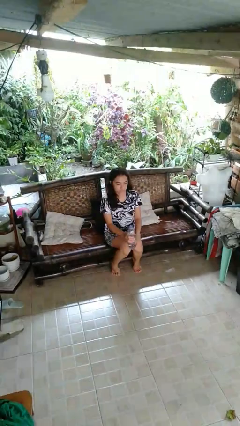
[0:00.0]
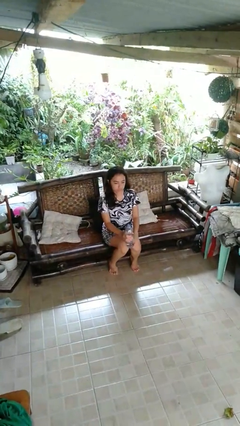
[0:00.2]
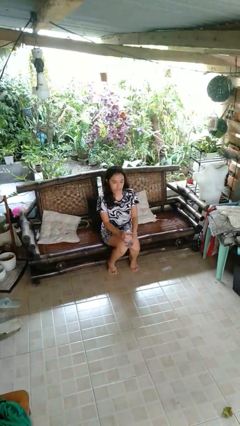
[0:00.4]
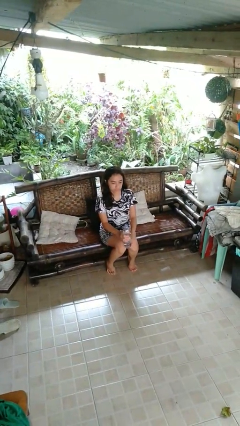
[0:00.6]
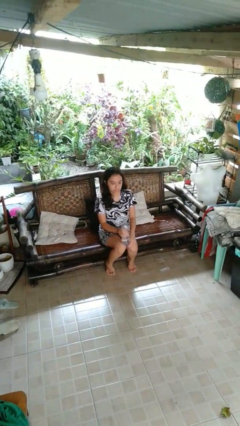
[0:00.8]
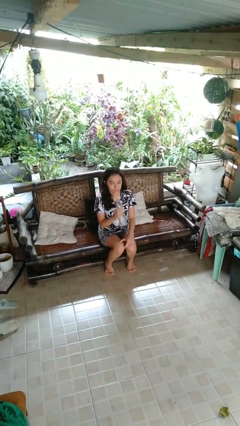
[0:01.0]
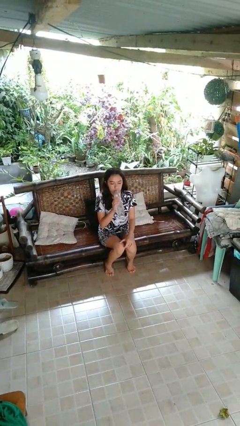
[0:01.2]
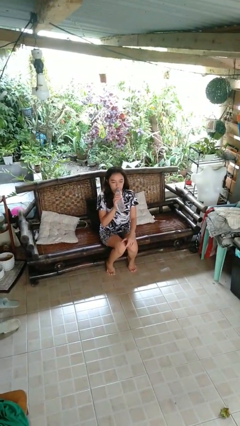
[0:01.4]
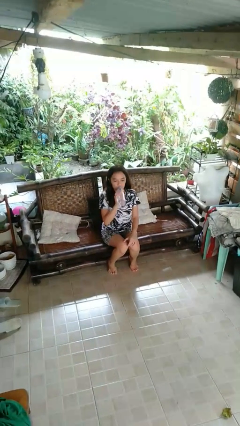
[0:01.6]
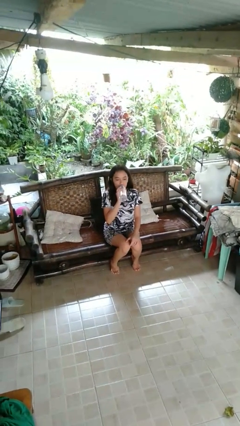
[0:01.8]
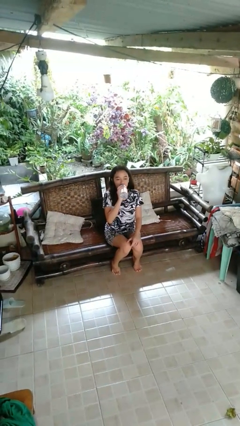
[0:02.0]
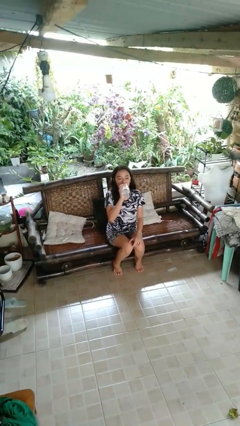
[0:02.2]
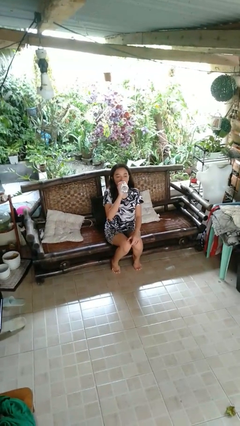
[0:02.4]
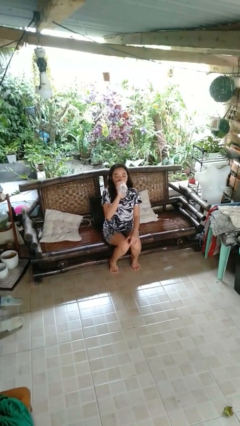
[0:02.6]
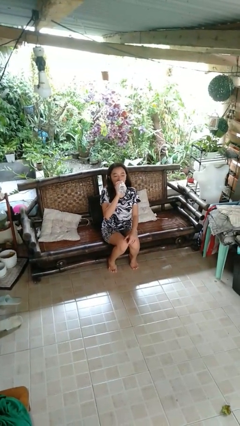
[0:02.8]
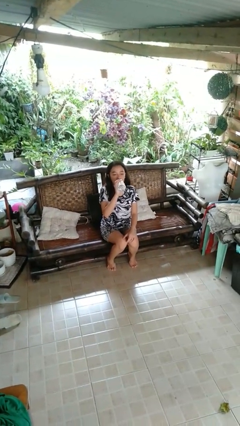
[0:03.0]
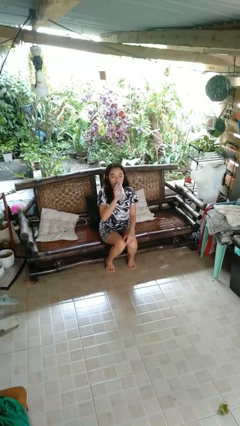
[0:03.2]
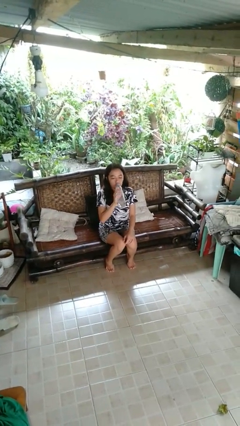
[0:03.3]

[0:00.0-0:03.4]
person drinks from bottle

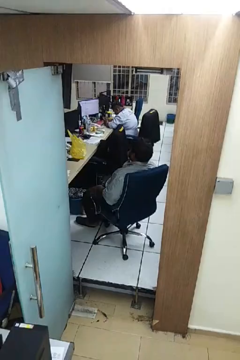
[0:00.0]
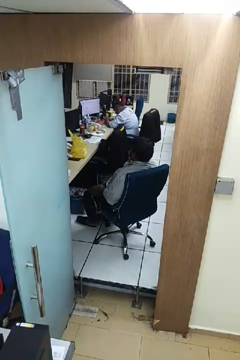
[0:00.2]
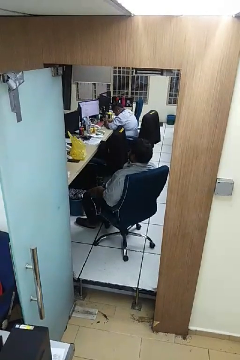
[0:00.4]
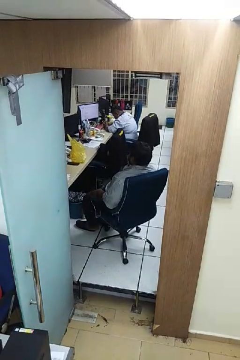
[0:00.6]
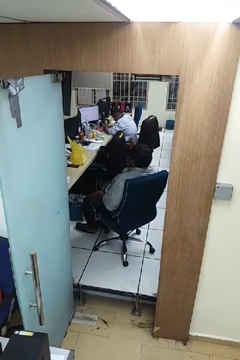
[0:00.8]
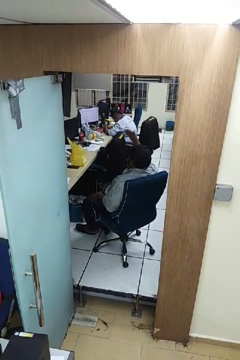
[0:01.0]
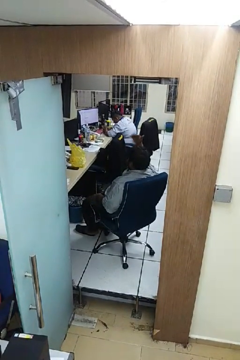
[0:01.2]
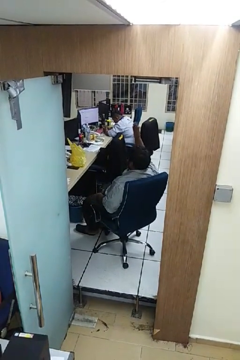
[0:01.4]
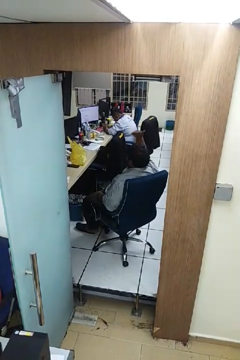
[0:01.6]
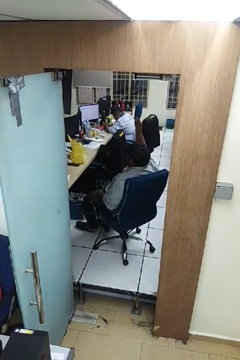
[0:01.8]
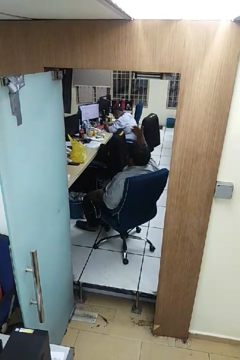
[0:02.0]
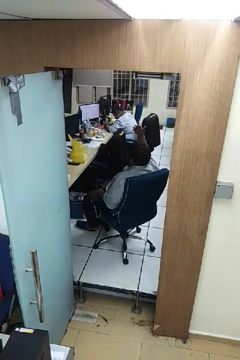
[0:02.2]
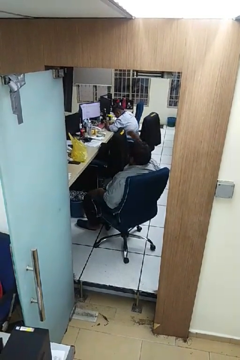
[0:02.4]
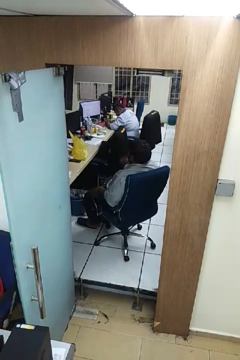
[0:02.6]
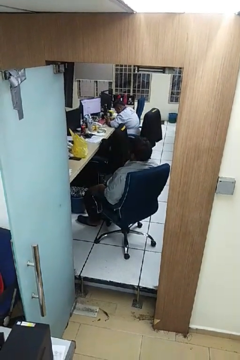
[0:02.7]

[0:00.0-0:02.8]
person gestures come here

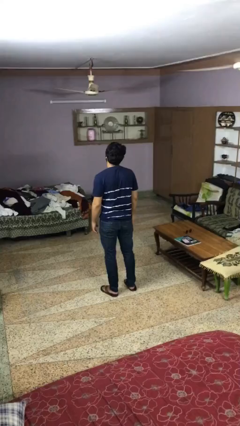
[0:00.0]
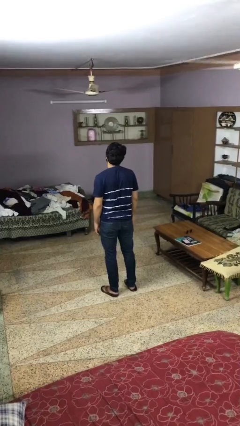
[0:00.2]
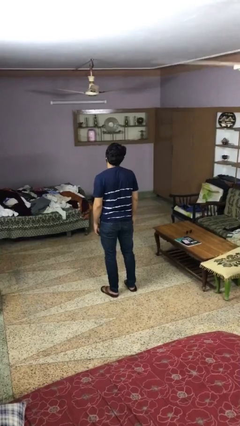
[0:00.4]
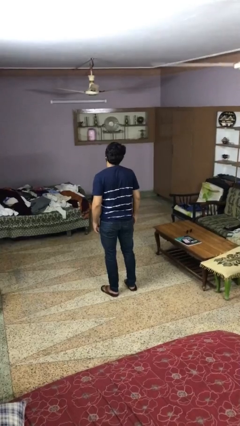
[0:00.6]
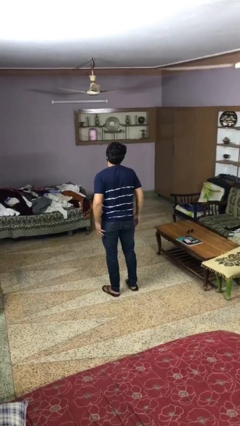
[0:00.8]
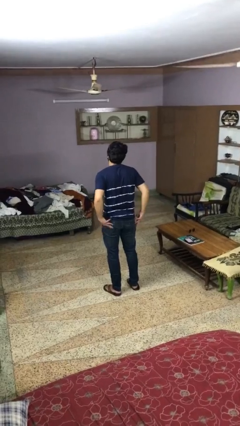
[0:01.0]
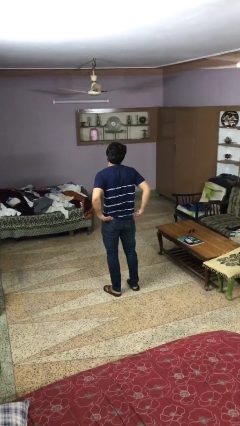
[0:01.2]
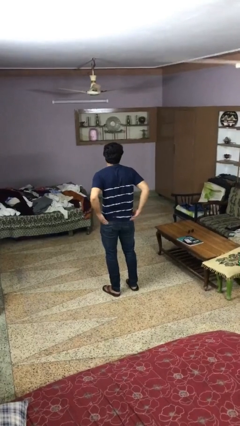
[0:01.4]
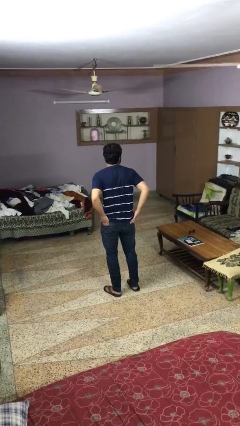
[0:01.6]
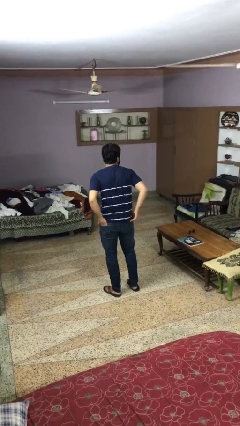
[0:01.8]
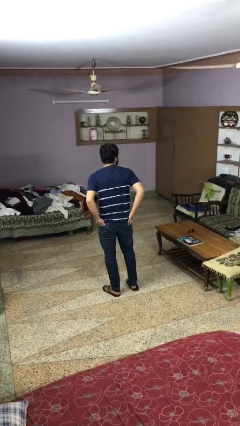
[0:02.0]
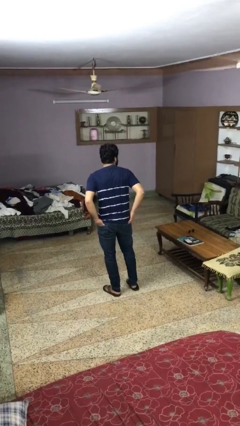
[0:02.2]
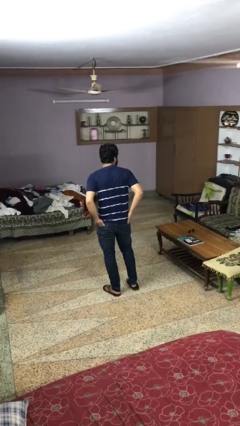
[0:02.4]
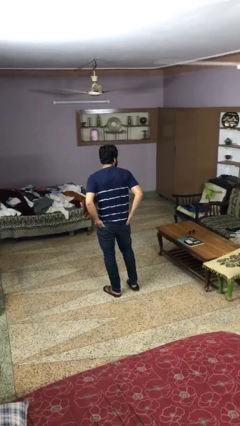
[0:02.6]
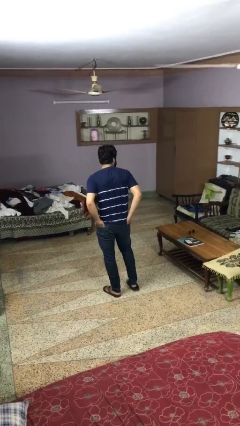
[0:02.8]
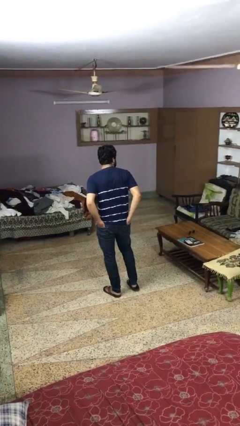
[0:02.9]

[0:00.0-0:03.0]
person puts hands in back pockets

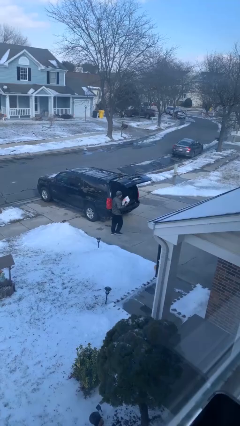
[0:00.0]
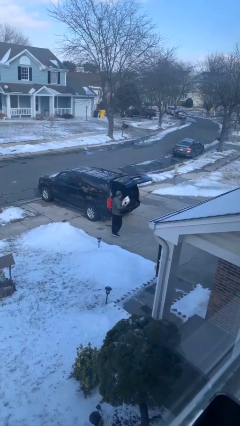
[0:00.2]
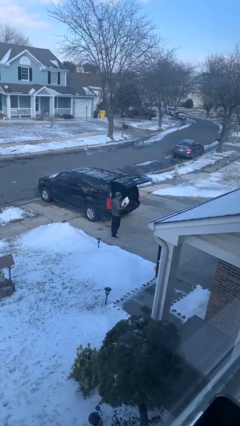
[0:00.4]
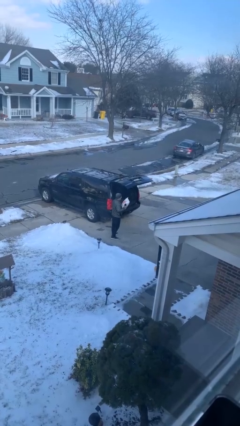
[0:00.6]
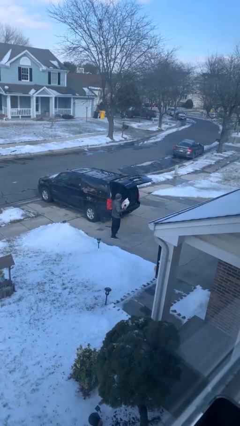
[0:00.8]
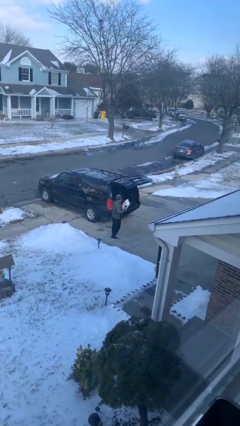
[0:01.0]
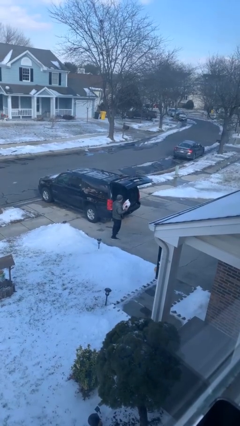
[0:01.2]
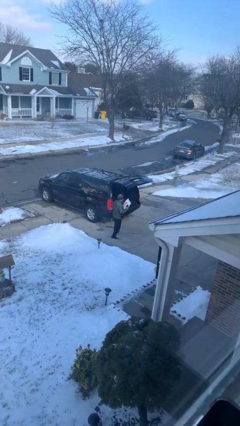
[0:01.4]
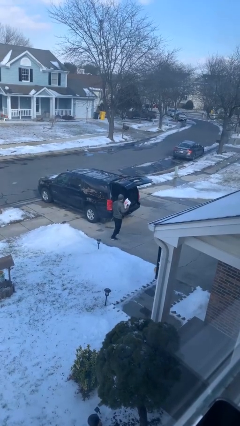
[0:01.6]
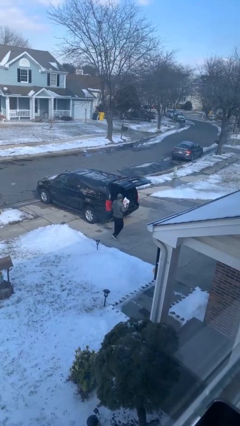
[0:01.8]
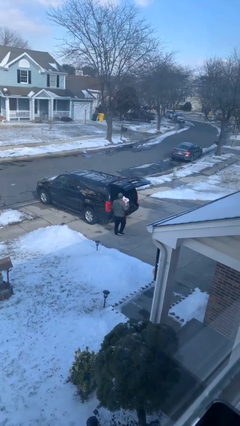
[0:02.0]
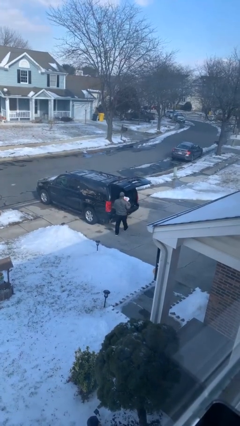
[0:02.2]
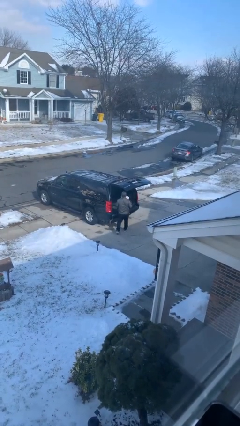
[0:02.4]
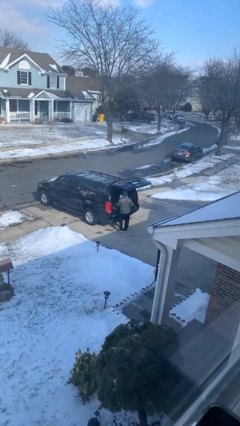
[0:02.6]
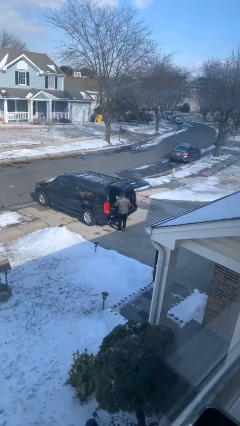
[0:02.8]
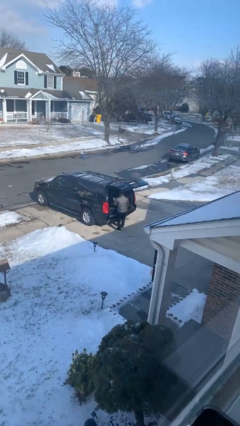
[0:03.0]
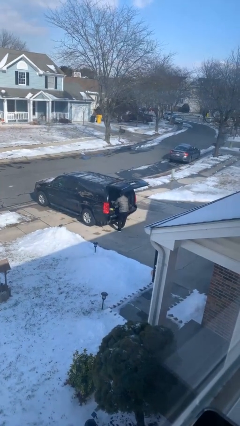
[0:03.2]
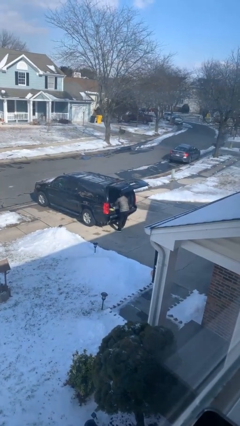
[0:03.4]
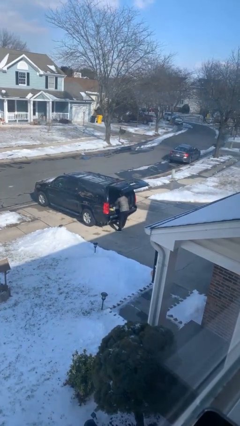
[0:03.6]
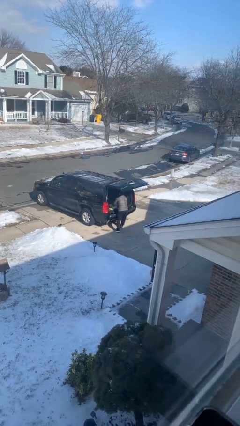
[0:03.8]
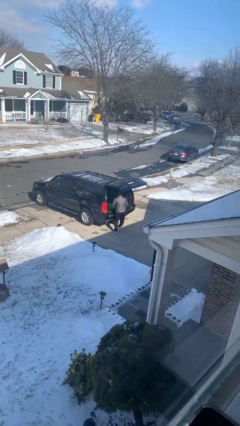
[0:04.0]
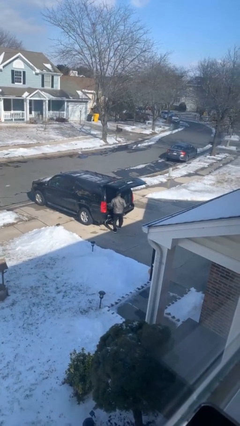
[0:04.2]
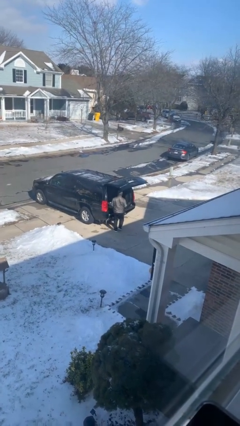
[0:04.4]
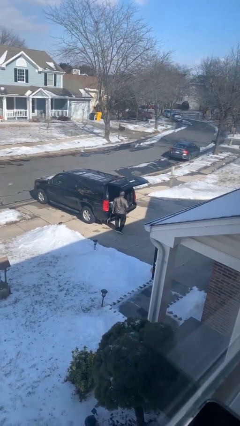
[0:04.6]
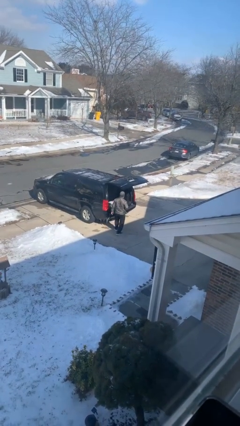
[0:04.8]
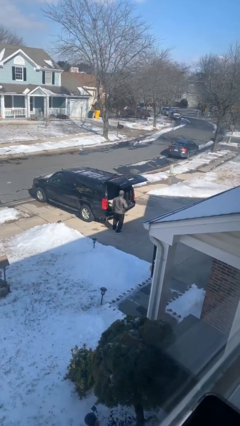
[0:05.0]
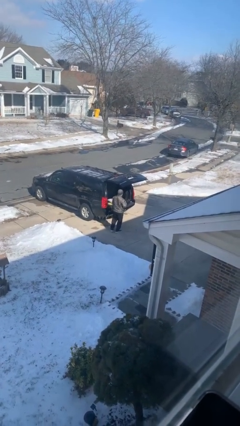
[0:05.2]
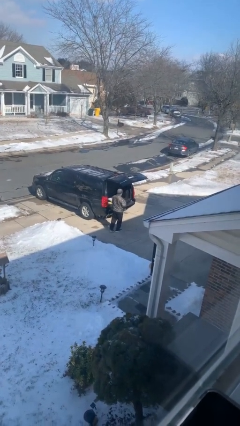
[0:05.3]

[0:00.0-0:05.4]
person loads car

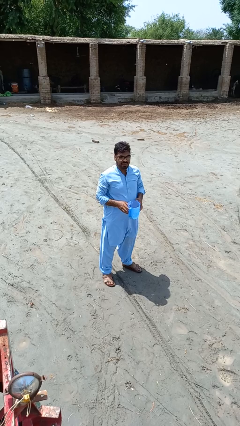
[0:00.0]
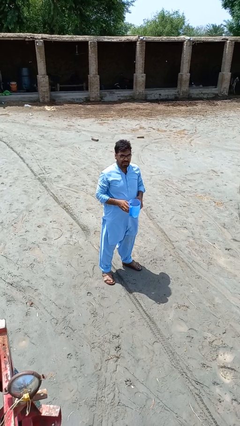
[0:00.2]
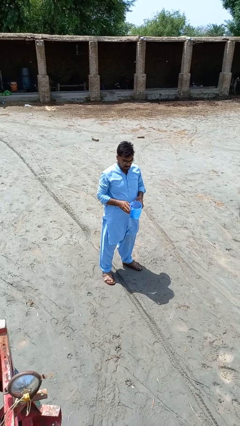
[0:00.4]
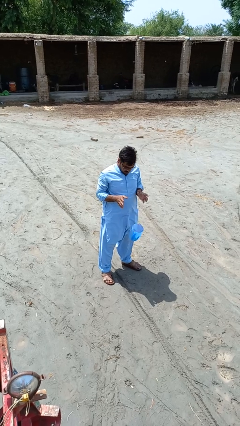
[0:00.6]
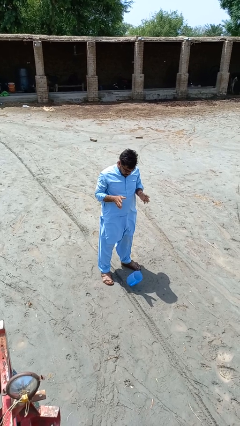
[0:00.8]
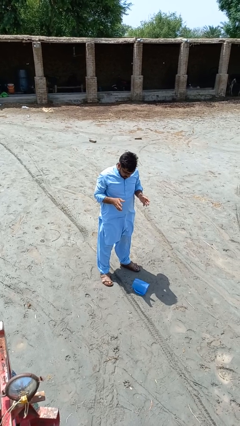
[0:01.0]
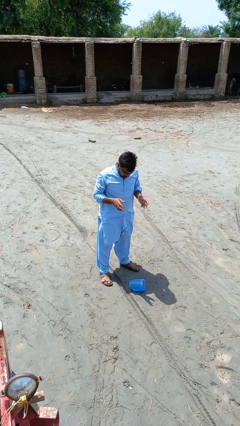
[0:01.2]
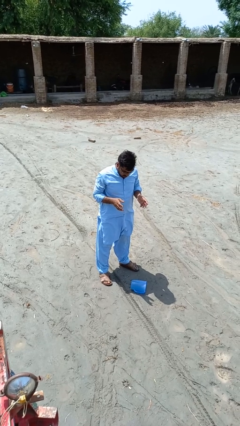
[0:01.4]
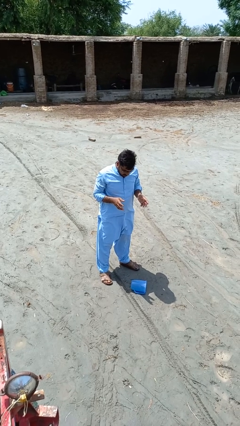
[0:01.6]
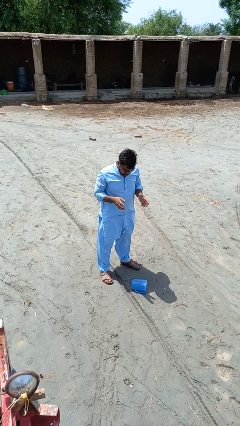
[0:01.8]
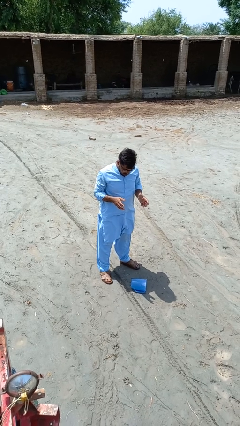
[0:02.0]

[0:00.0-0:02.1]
person drops object

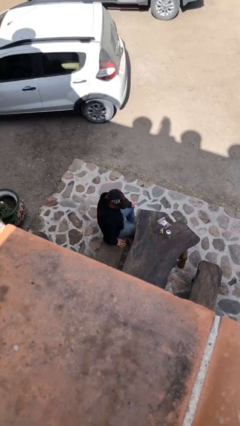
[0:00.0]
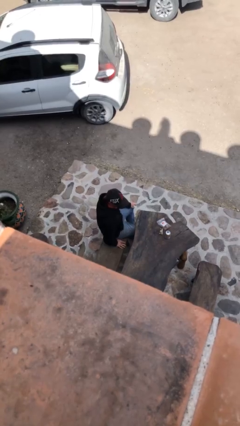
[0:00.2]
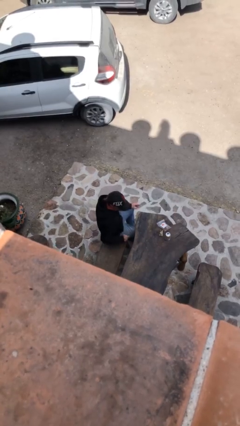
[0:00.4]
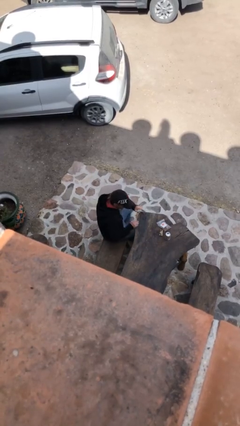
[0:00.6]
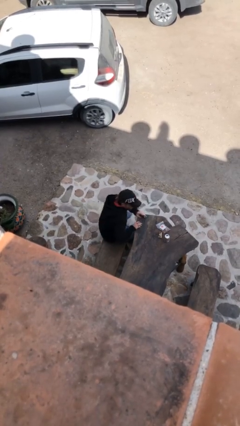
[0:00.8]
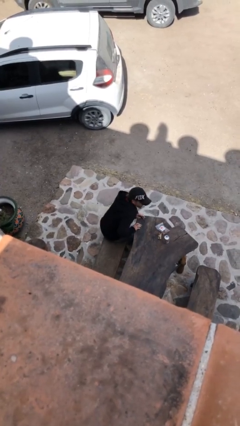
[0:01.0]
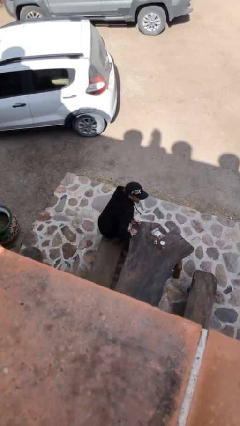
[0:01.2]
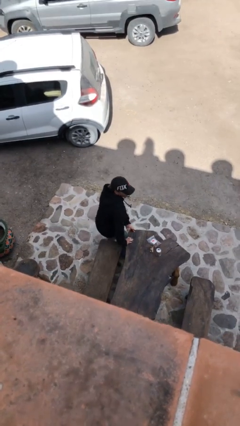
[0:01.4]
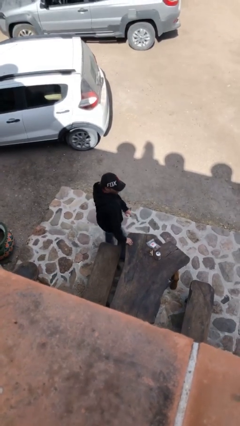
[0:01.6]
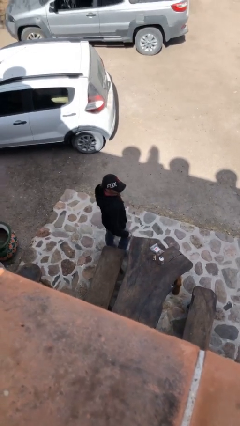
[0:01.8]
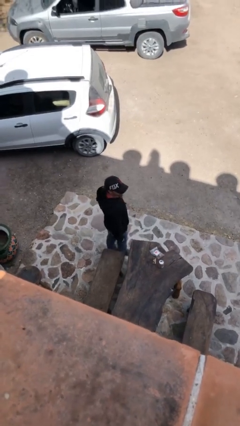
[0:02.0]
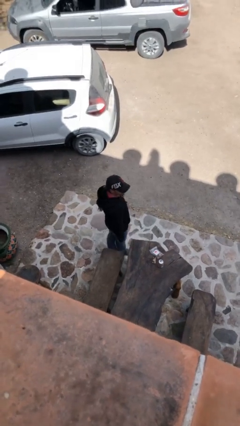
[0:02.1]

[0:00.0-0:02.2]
person stands up
